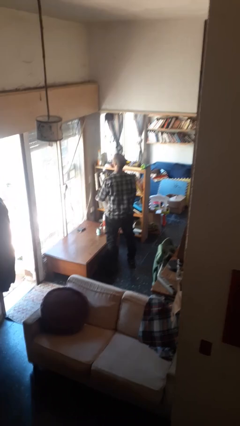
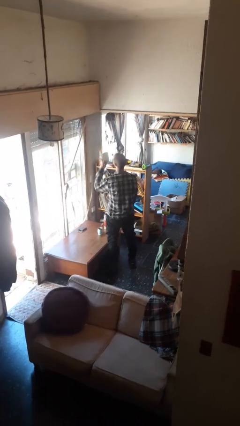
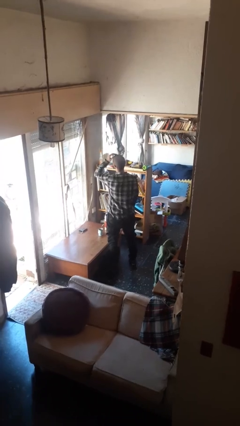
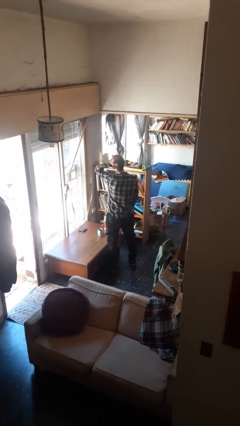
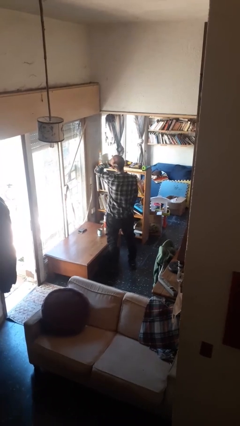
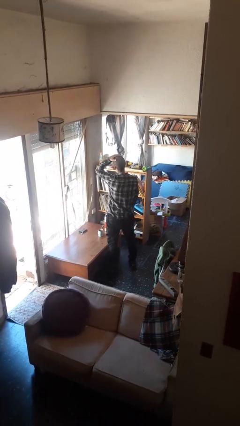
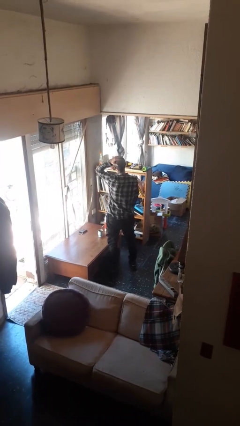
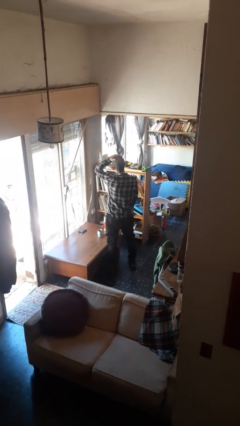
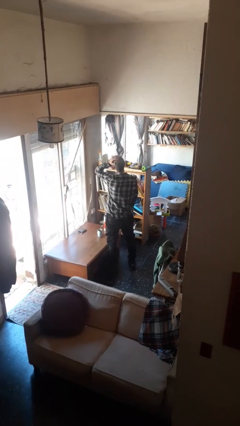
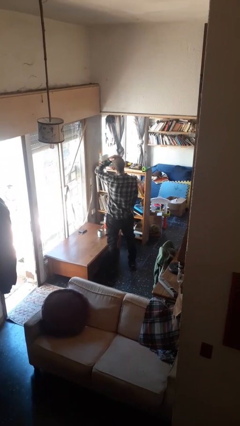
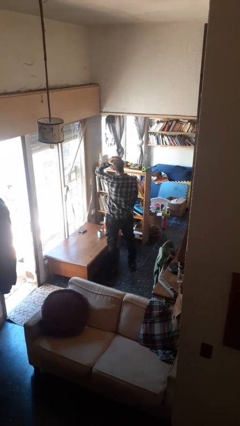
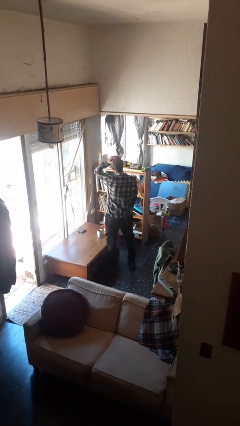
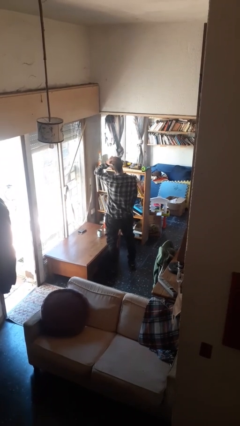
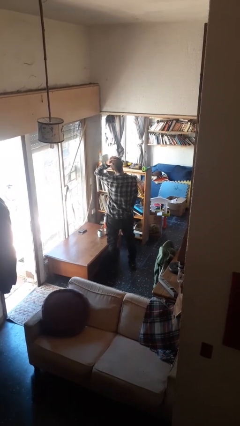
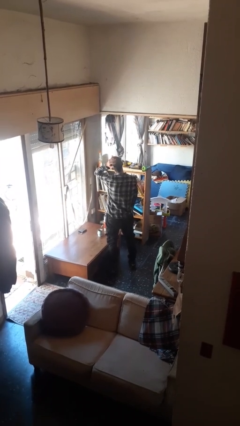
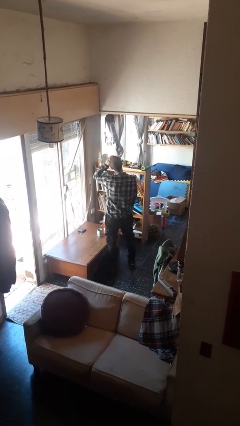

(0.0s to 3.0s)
person pats head

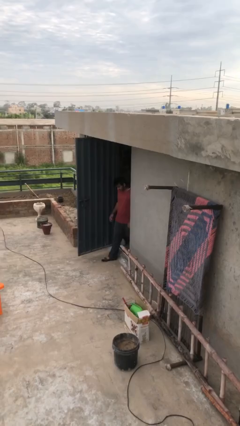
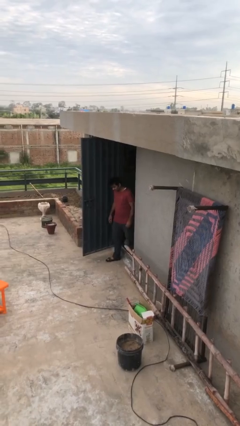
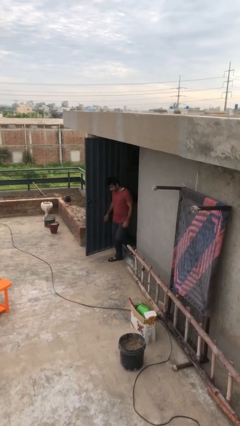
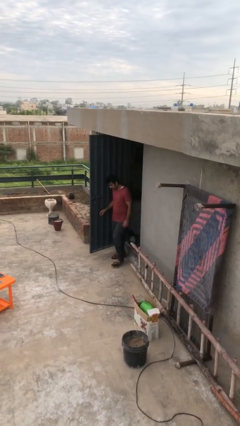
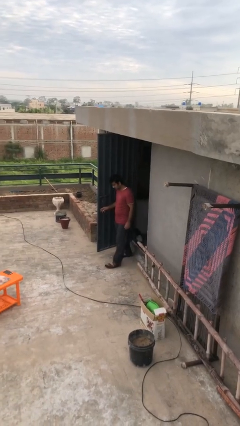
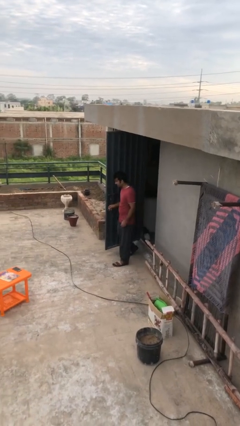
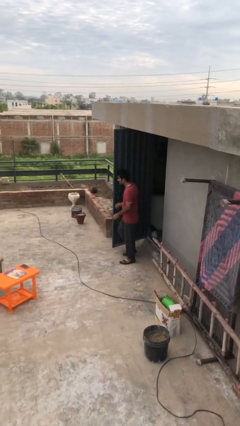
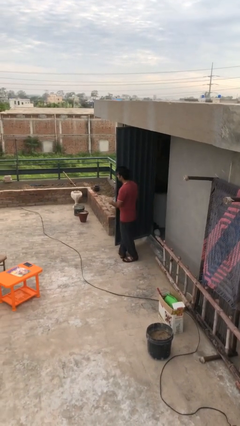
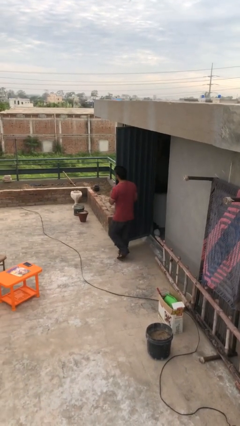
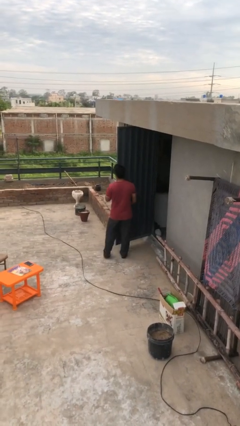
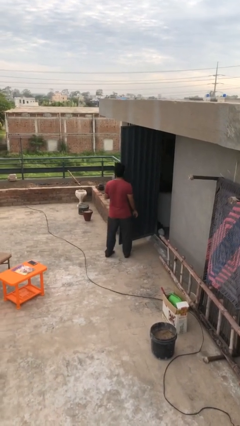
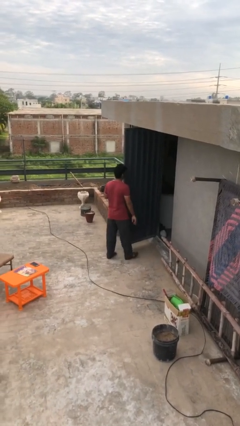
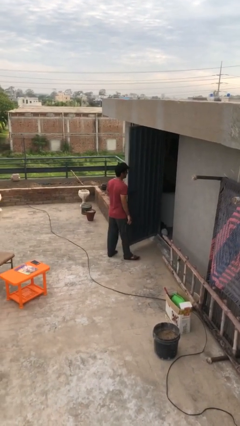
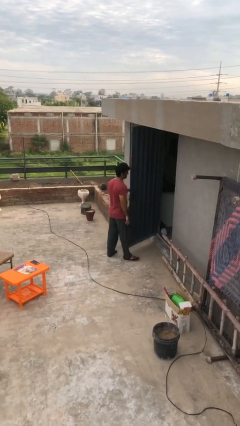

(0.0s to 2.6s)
person enters scene through structure

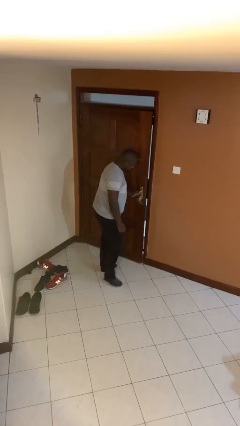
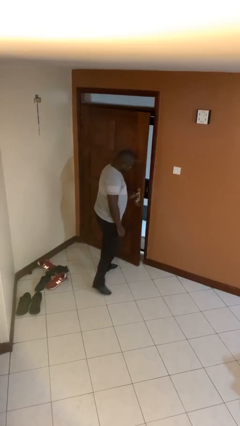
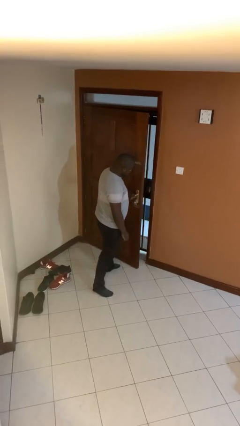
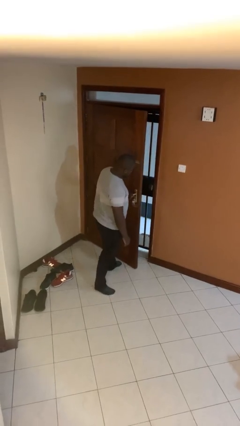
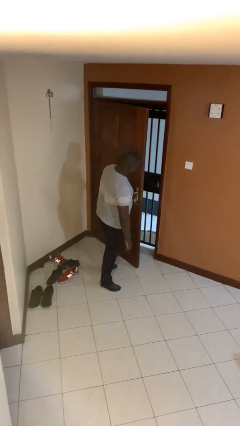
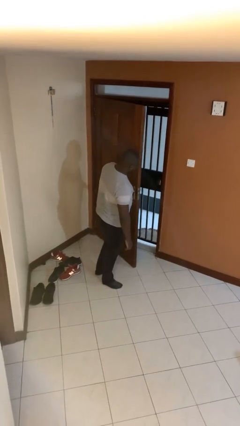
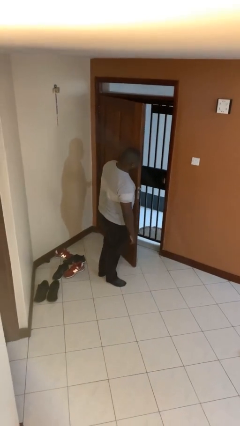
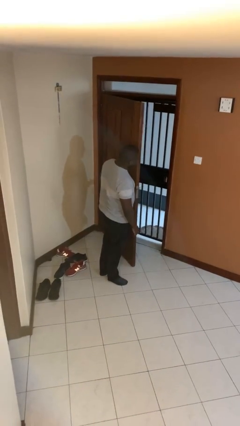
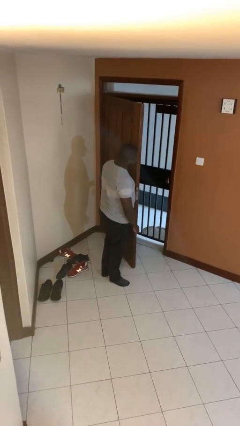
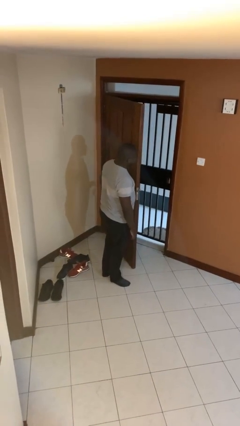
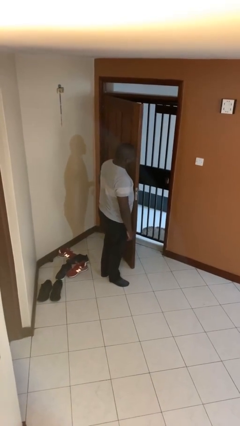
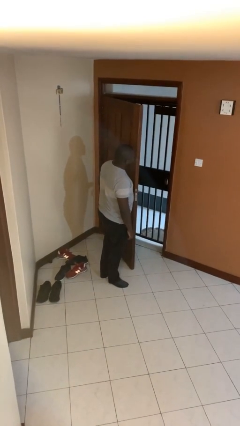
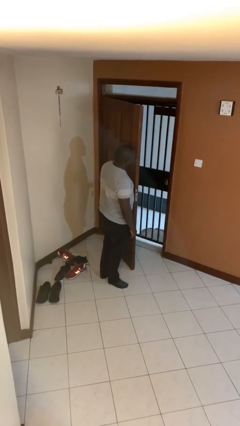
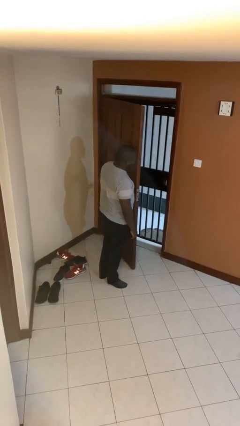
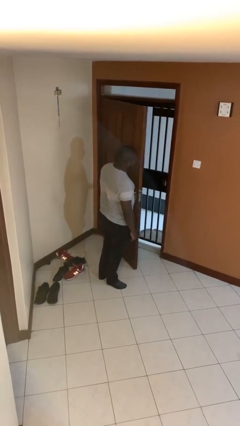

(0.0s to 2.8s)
person opens facility door

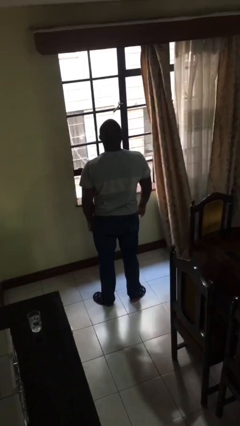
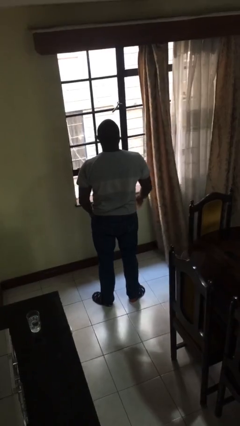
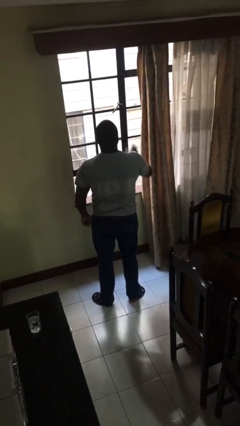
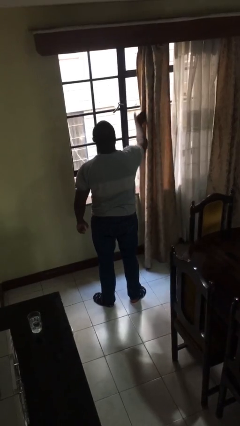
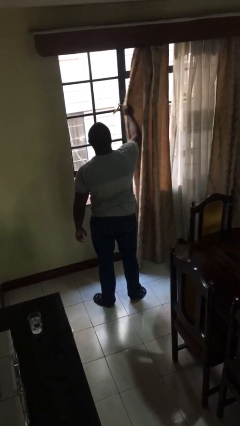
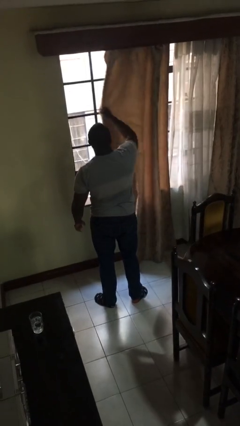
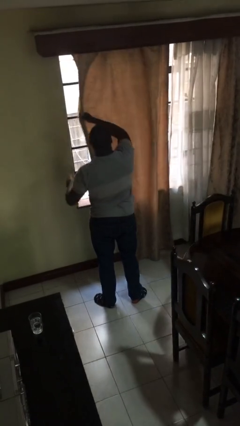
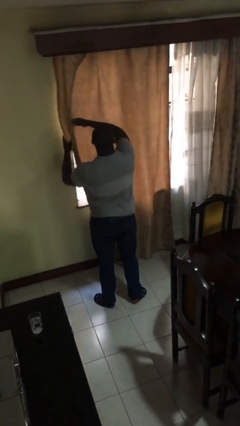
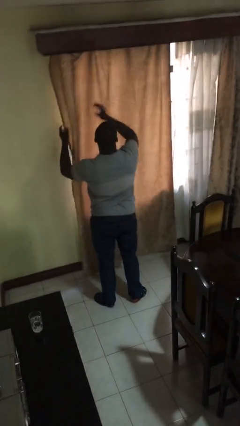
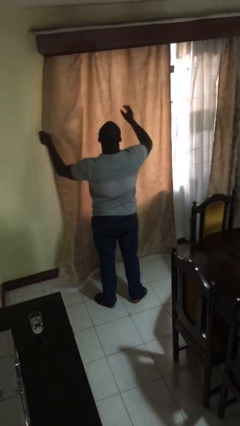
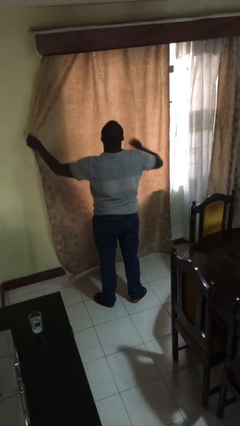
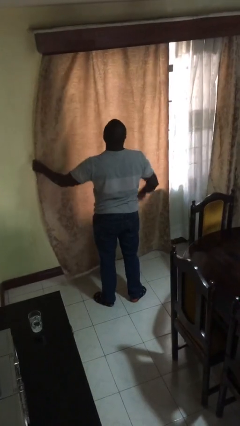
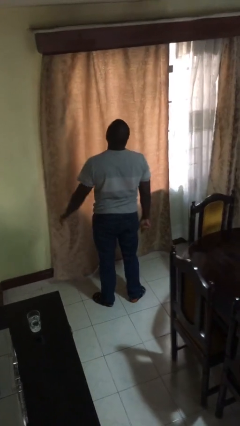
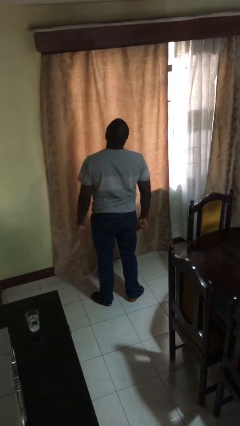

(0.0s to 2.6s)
person closes curtains

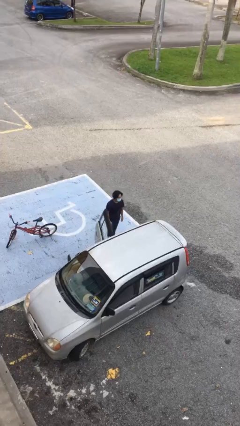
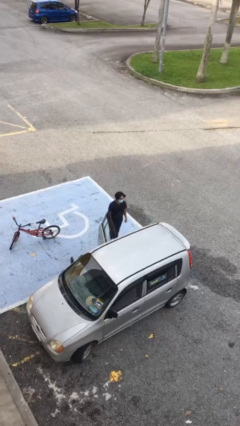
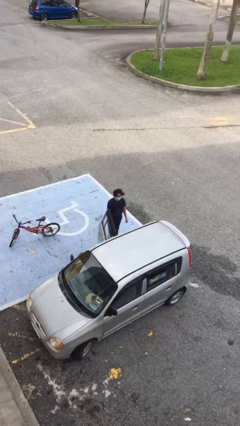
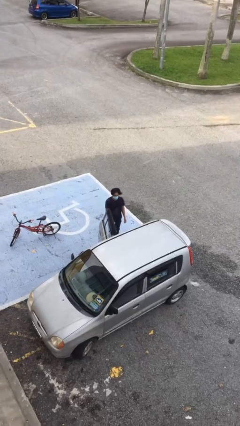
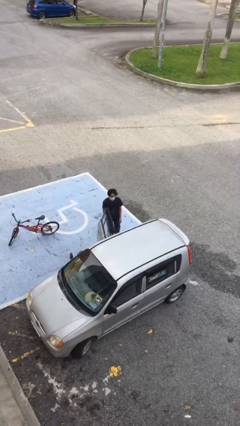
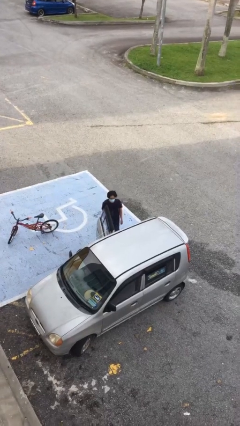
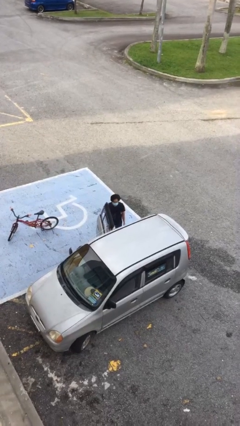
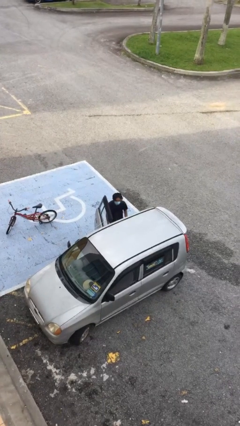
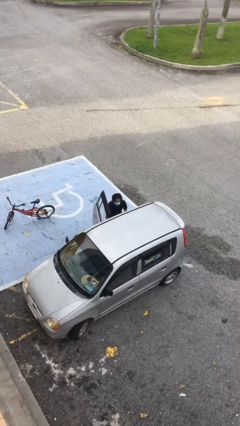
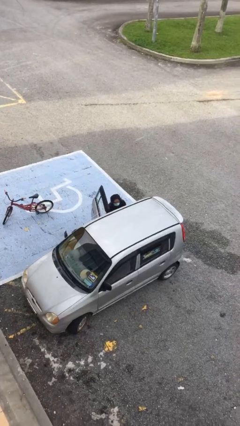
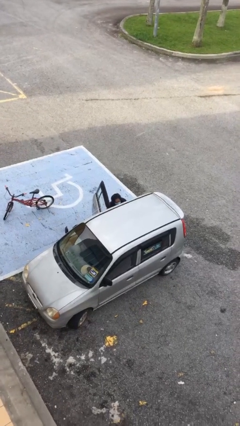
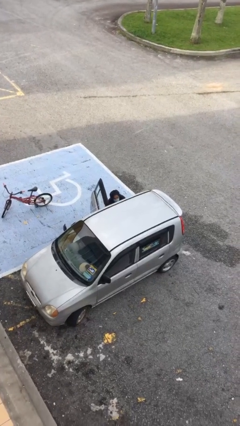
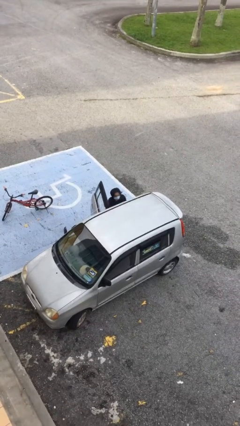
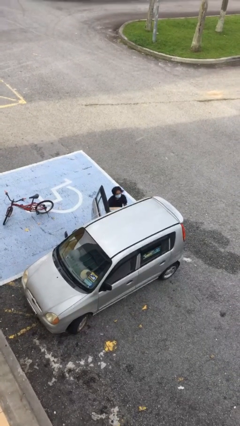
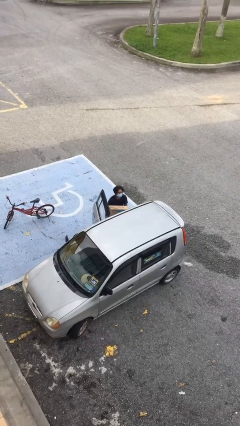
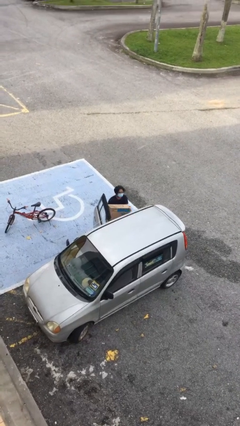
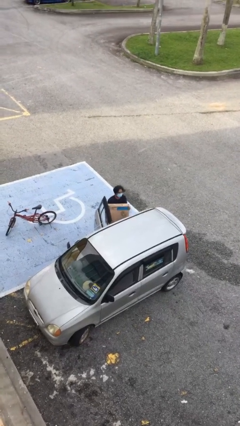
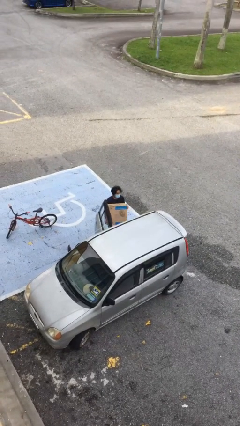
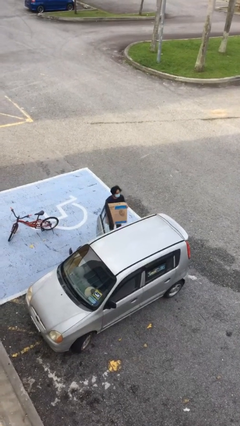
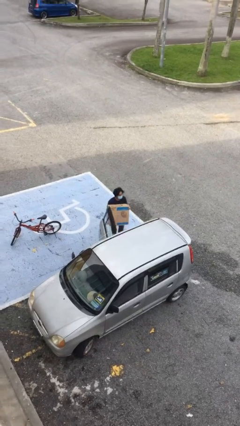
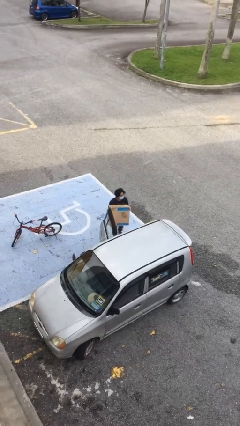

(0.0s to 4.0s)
person unloads car

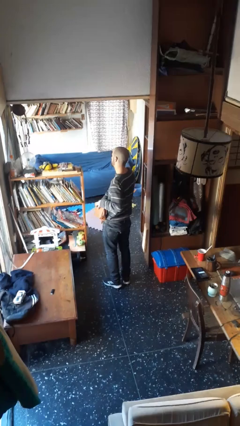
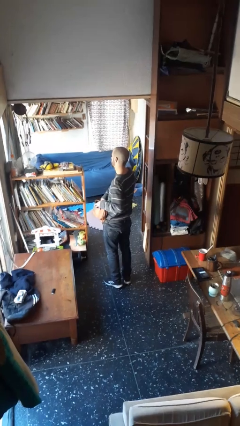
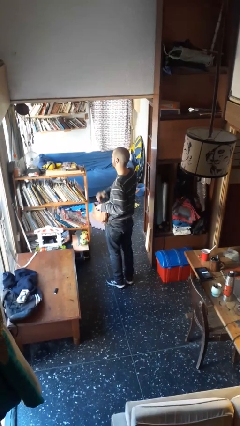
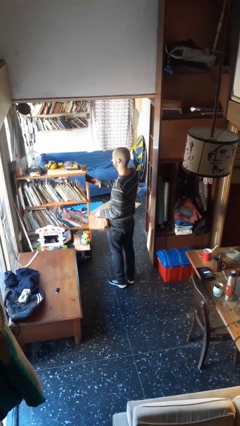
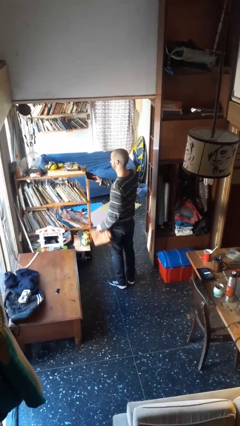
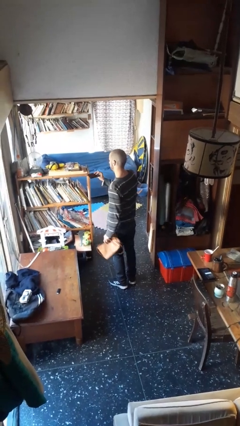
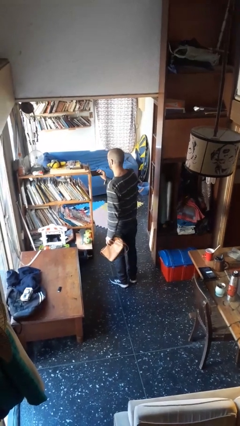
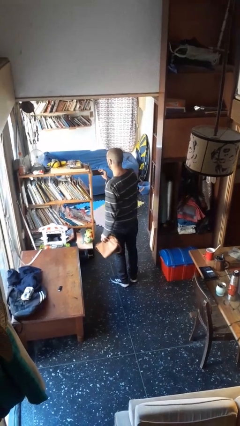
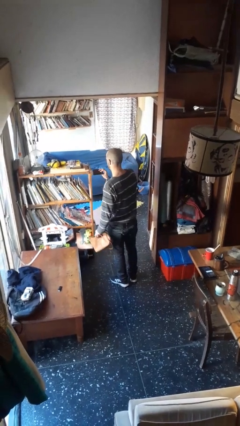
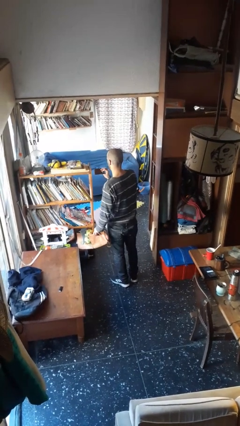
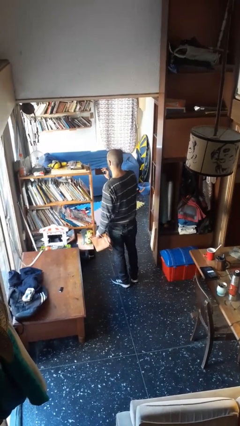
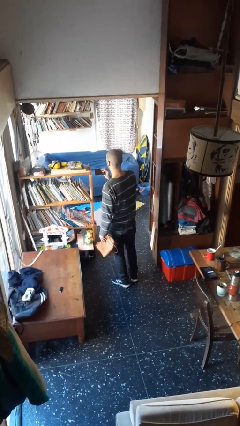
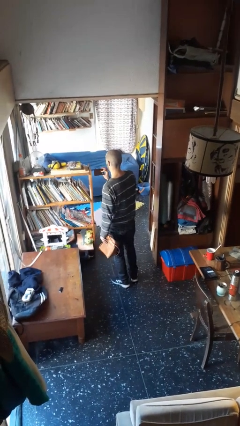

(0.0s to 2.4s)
person takes object from purse
